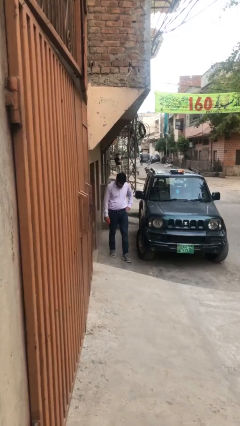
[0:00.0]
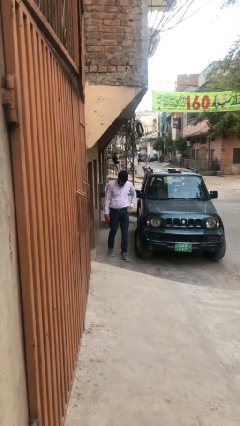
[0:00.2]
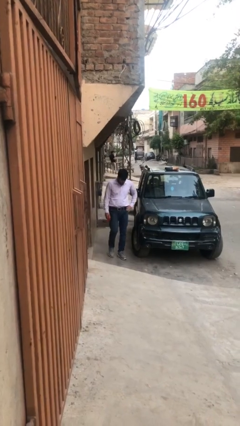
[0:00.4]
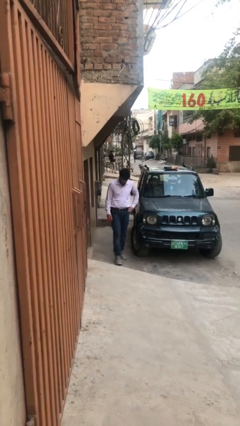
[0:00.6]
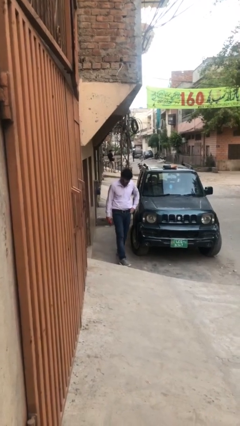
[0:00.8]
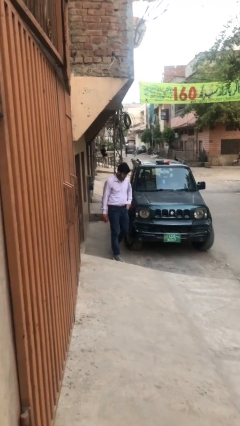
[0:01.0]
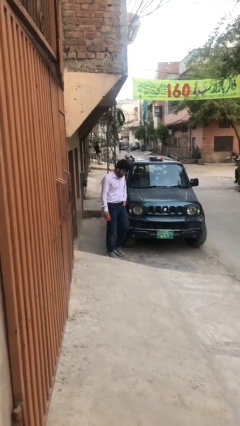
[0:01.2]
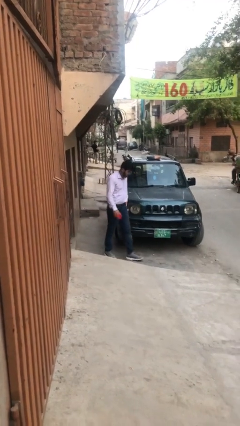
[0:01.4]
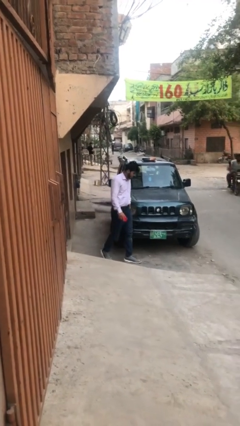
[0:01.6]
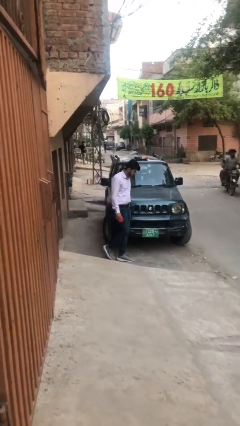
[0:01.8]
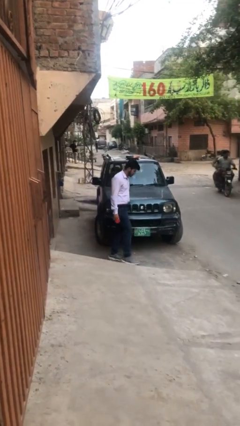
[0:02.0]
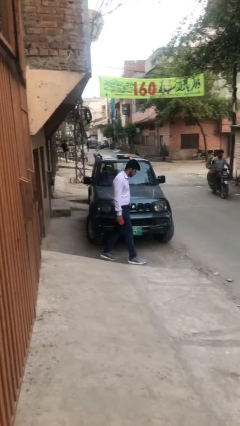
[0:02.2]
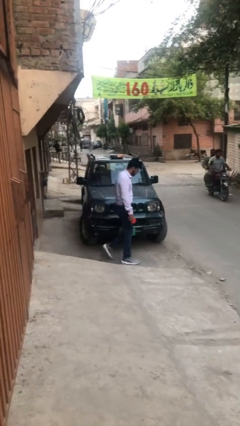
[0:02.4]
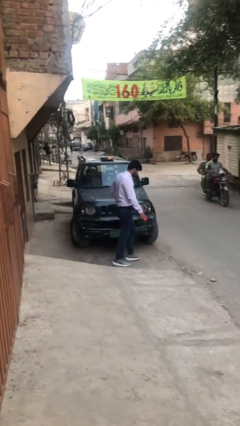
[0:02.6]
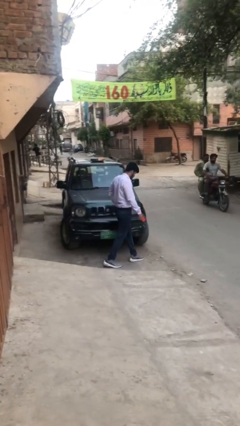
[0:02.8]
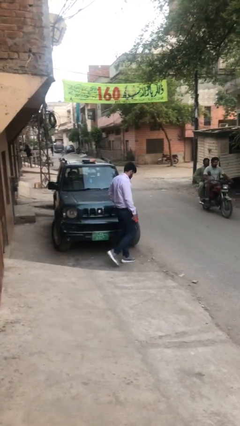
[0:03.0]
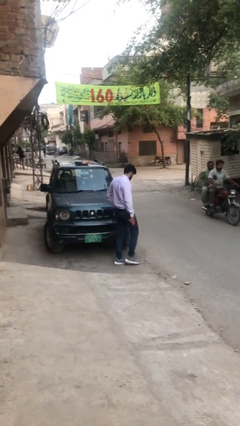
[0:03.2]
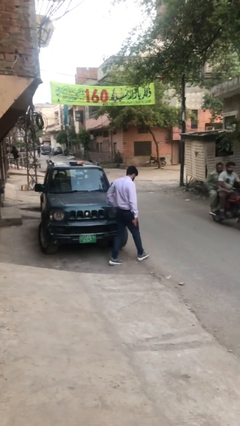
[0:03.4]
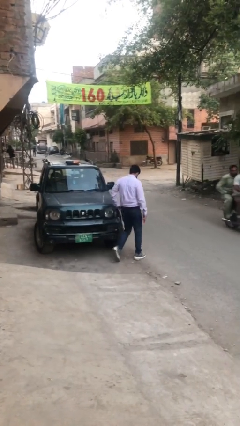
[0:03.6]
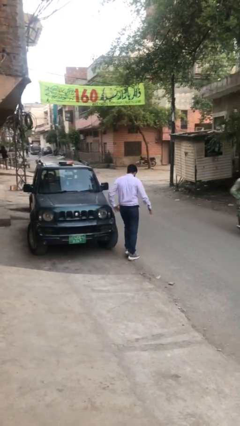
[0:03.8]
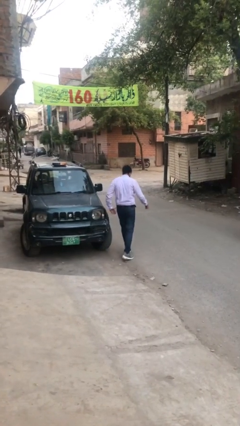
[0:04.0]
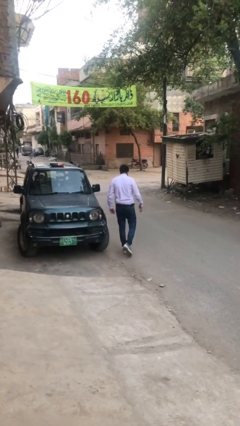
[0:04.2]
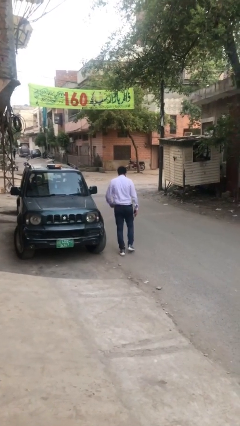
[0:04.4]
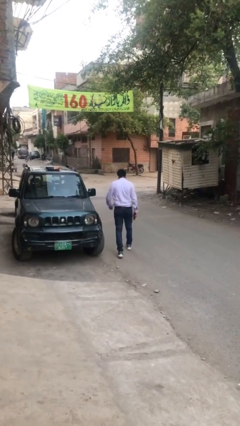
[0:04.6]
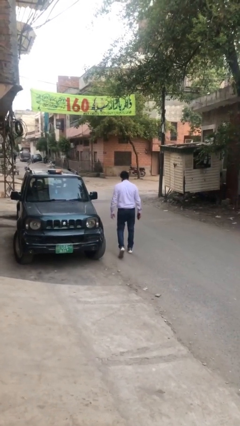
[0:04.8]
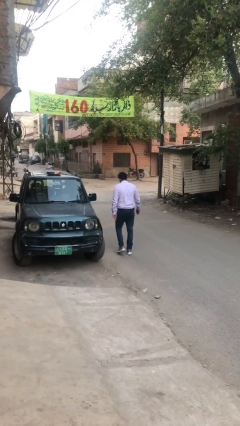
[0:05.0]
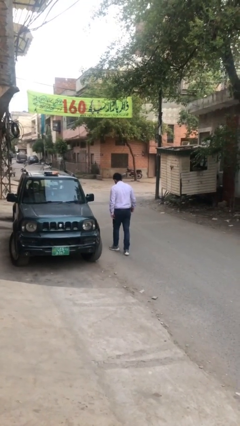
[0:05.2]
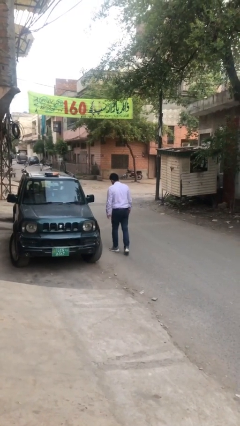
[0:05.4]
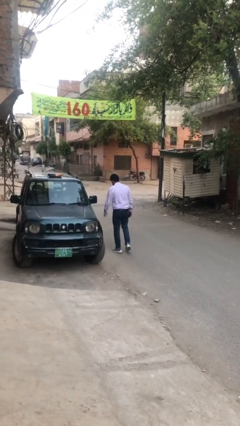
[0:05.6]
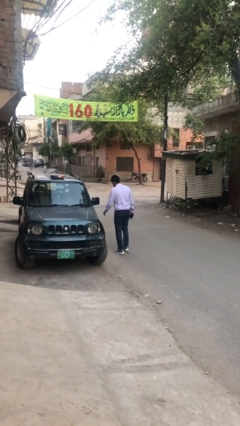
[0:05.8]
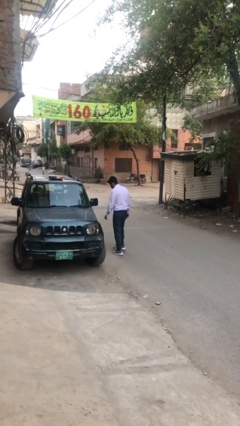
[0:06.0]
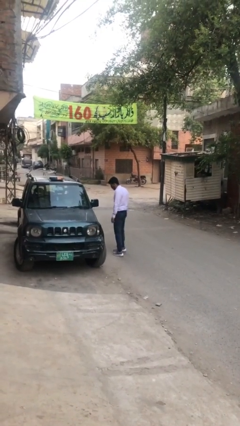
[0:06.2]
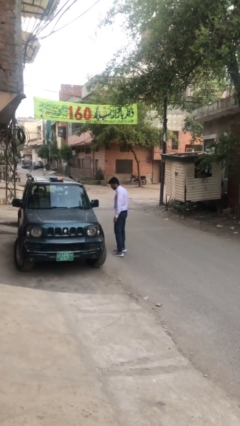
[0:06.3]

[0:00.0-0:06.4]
person walks around car

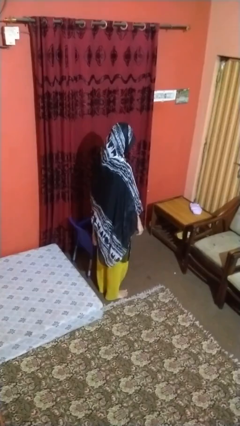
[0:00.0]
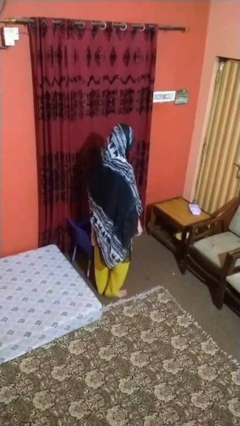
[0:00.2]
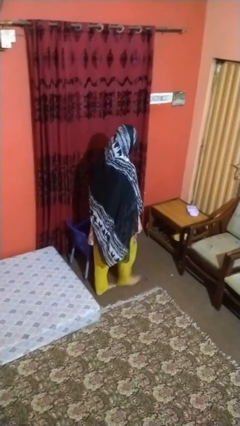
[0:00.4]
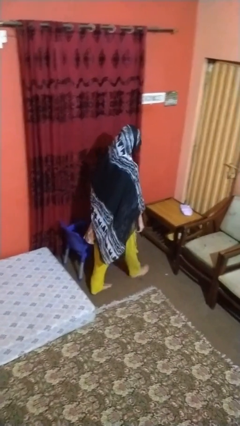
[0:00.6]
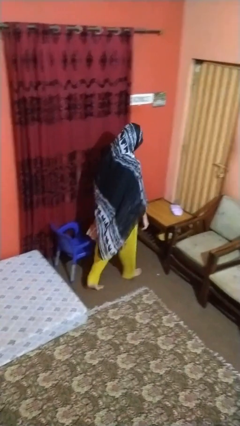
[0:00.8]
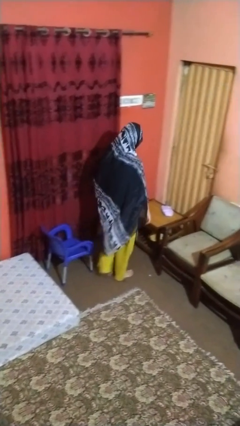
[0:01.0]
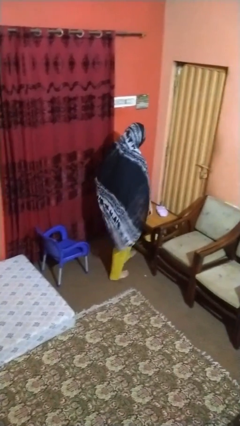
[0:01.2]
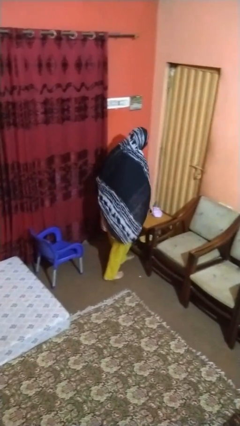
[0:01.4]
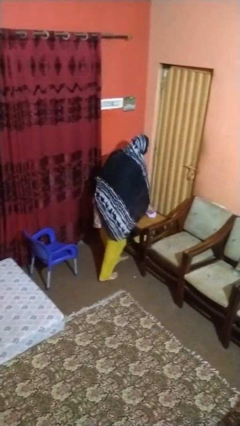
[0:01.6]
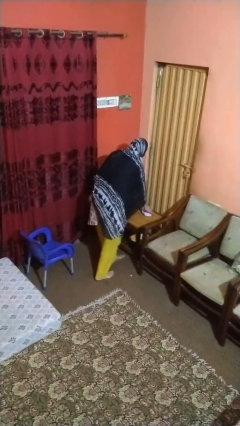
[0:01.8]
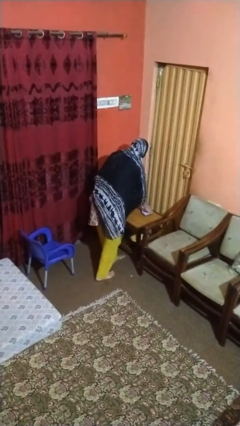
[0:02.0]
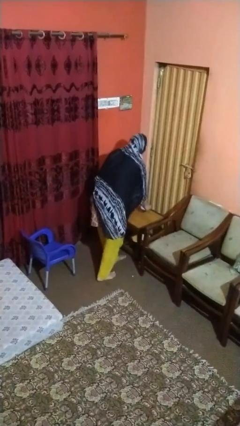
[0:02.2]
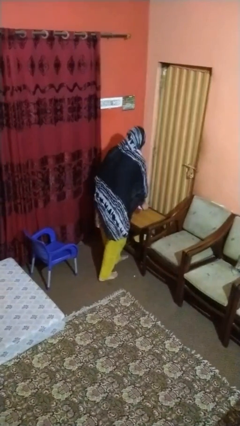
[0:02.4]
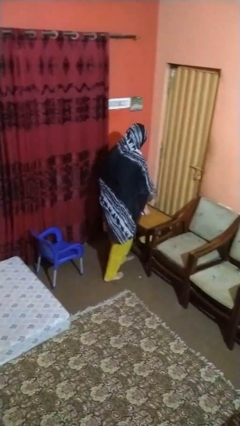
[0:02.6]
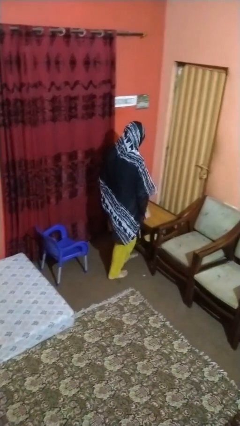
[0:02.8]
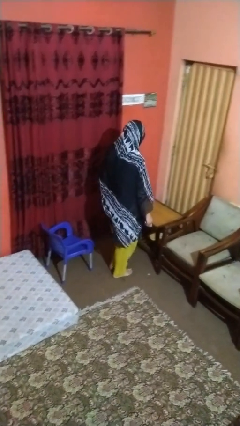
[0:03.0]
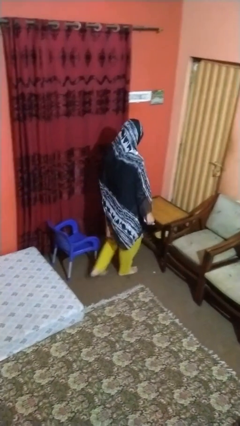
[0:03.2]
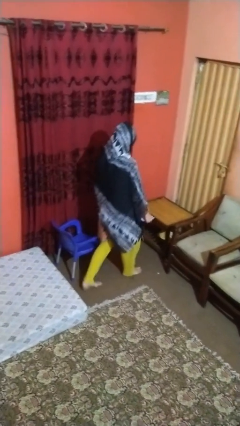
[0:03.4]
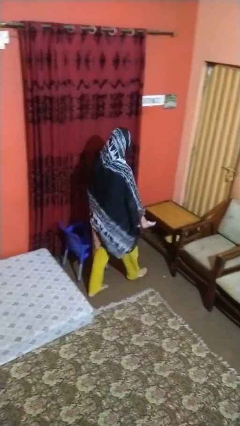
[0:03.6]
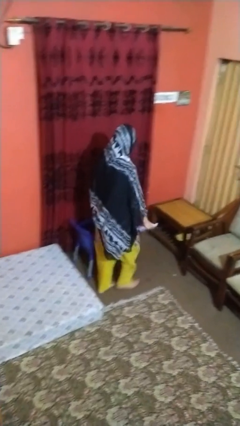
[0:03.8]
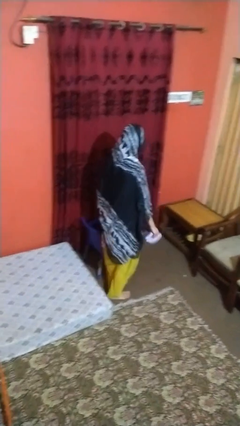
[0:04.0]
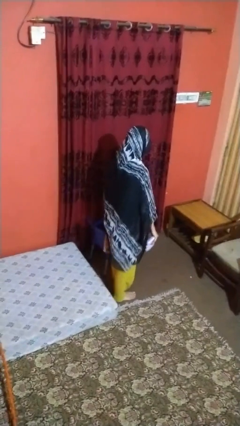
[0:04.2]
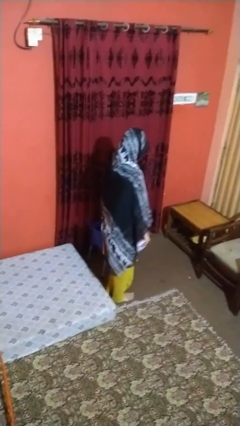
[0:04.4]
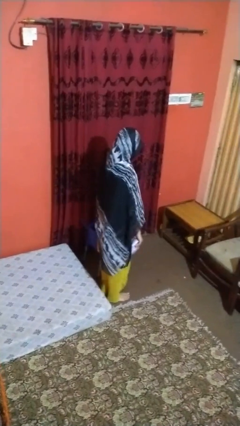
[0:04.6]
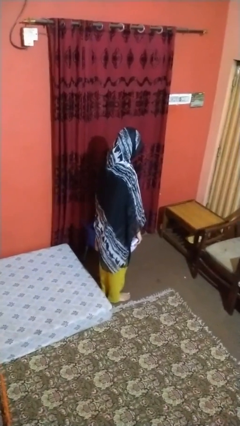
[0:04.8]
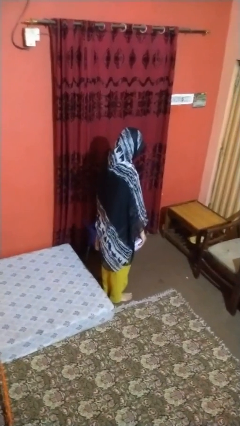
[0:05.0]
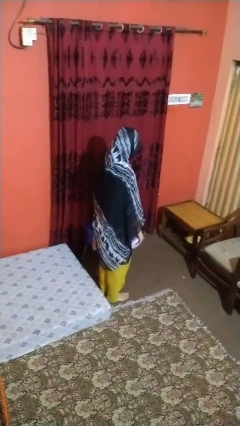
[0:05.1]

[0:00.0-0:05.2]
person picks up object from table

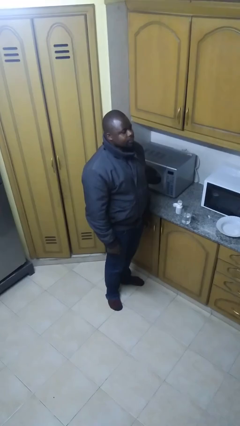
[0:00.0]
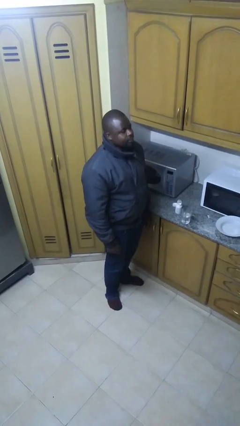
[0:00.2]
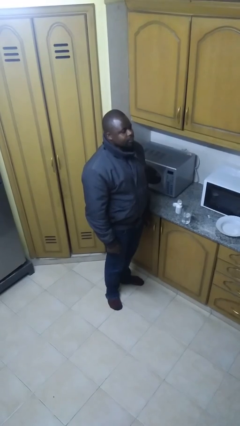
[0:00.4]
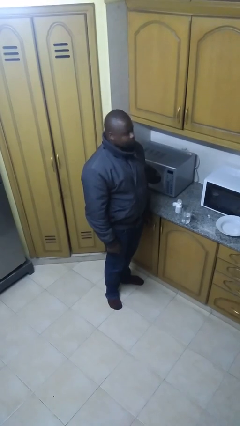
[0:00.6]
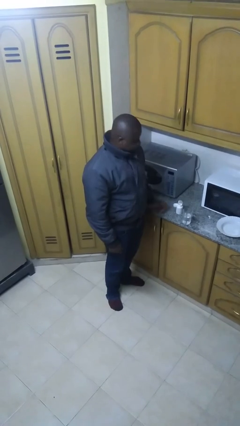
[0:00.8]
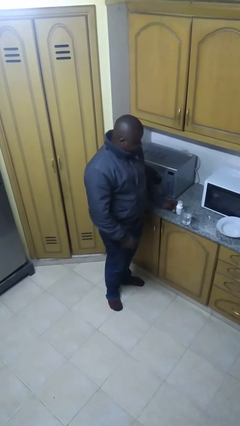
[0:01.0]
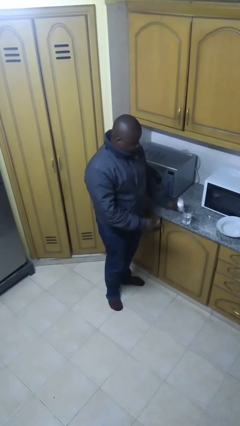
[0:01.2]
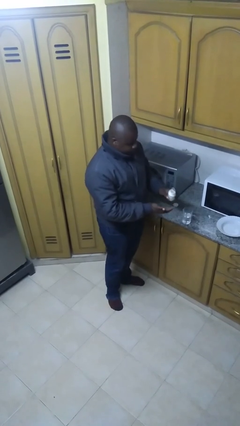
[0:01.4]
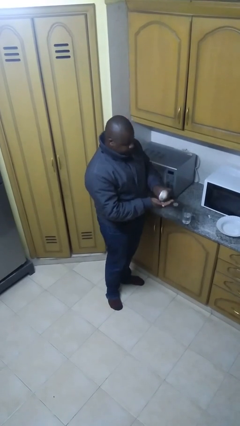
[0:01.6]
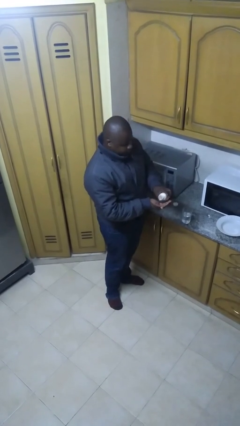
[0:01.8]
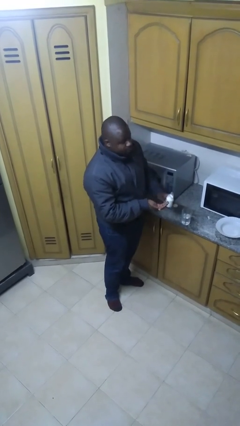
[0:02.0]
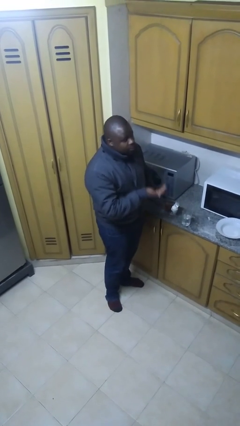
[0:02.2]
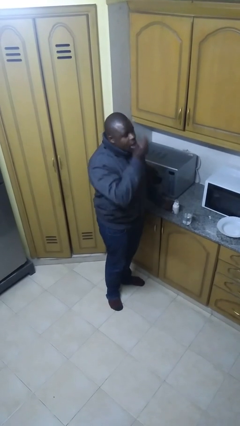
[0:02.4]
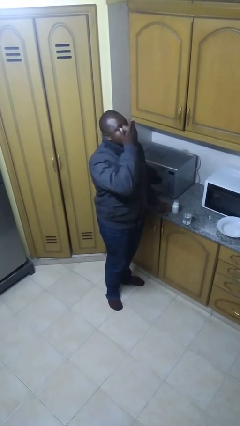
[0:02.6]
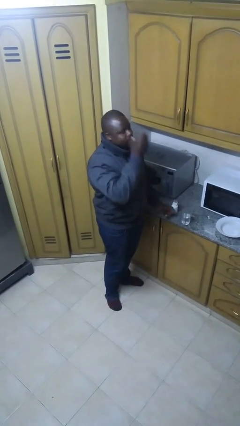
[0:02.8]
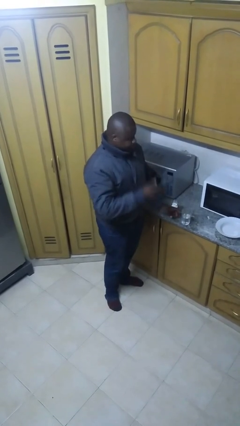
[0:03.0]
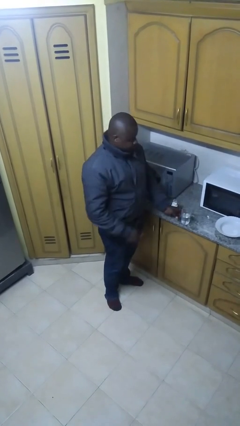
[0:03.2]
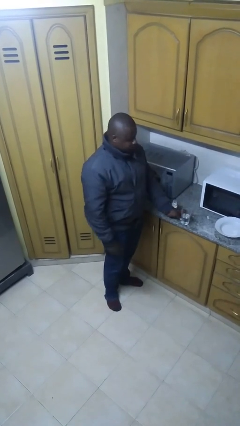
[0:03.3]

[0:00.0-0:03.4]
person takes medicine pills

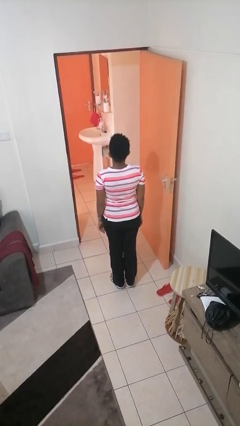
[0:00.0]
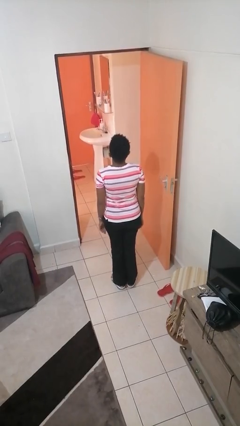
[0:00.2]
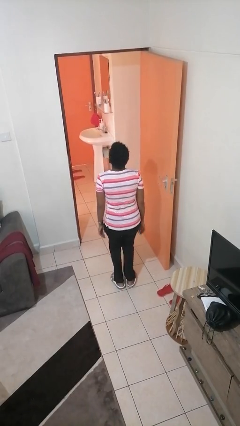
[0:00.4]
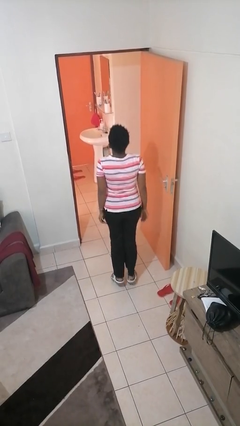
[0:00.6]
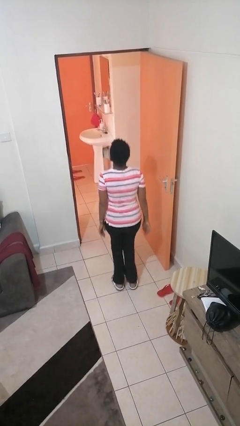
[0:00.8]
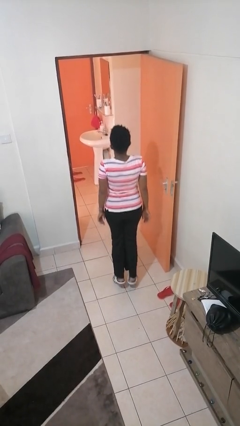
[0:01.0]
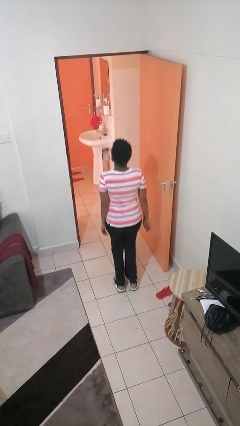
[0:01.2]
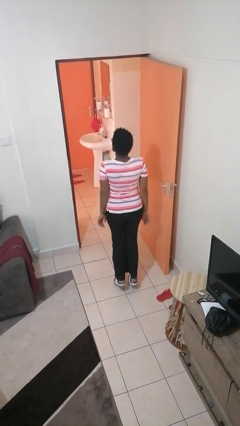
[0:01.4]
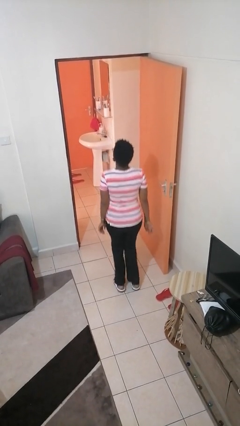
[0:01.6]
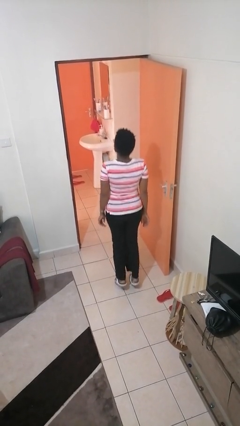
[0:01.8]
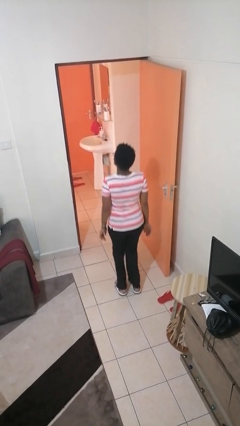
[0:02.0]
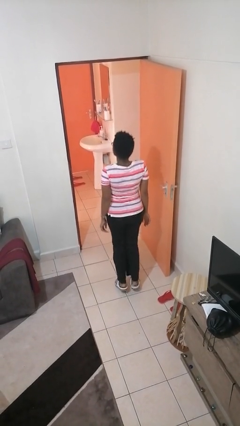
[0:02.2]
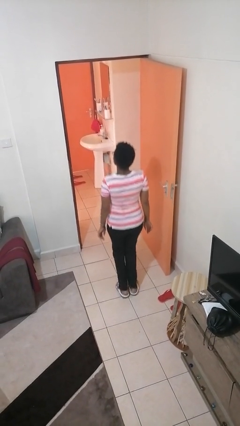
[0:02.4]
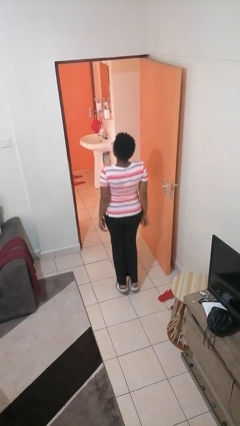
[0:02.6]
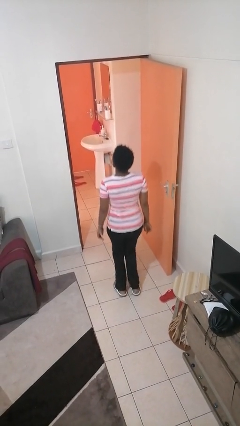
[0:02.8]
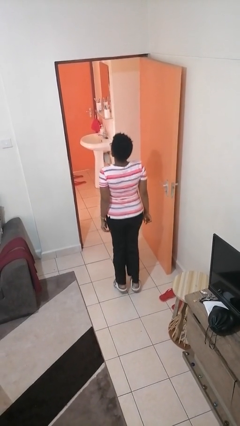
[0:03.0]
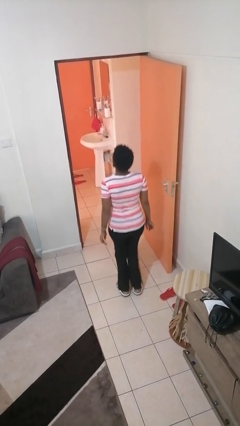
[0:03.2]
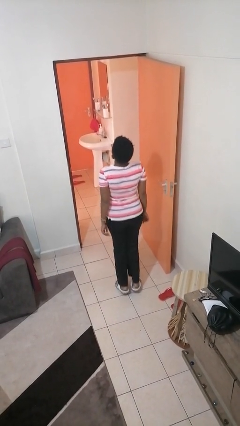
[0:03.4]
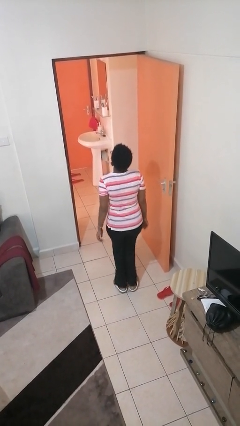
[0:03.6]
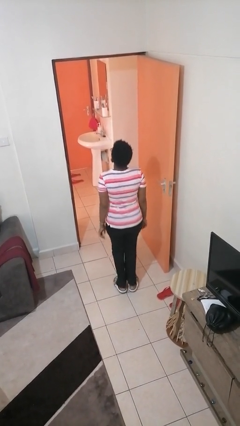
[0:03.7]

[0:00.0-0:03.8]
person jumps
